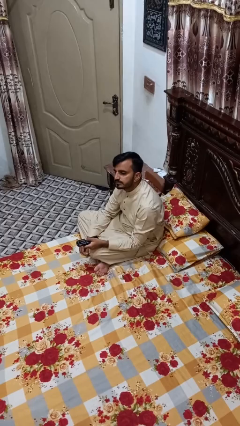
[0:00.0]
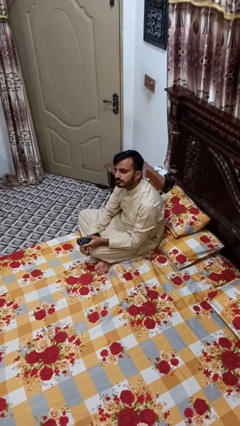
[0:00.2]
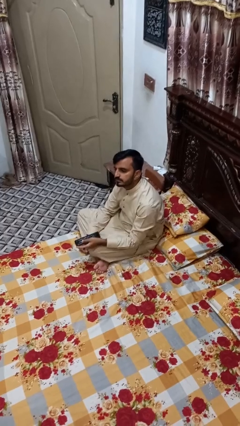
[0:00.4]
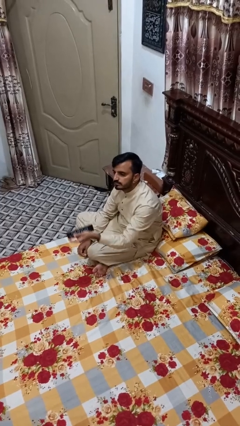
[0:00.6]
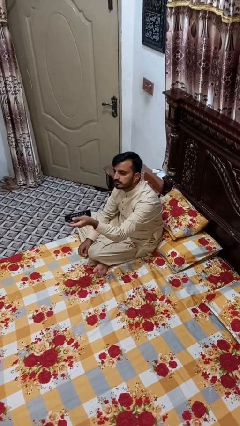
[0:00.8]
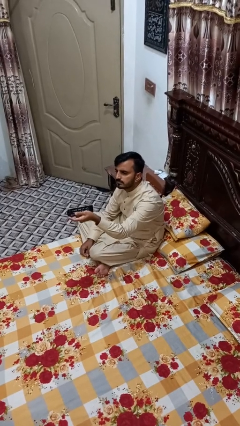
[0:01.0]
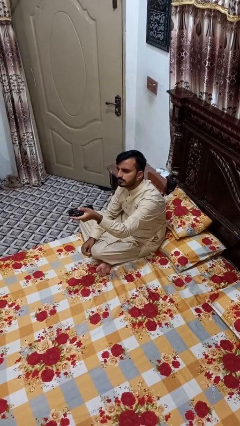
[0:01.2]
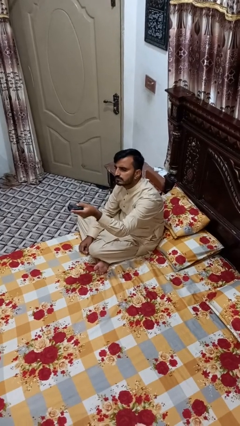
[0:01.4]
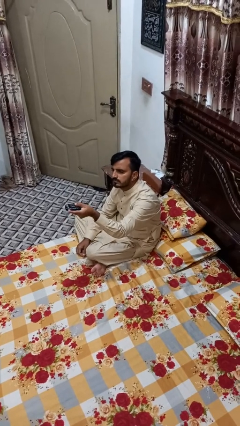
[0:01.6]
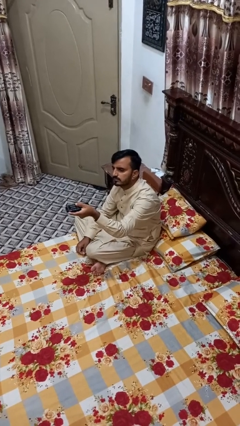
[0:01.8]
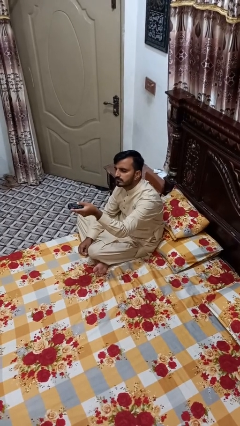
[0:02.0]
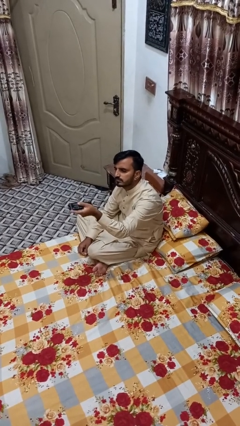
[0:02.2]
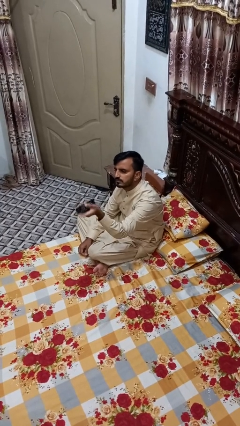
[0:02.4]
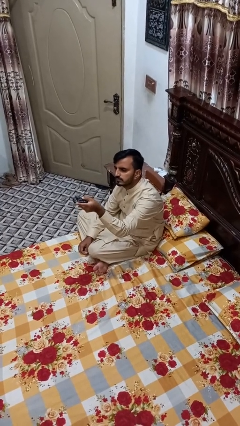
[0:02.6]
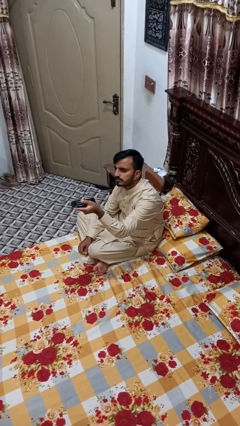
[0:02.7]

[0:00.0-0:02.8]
person uses television remote

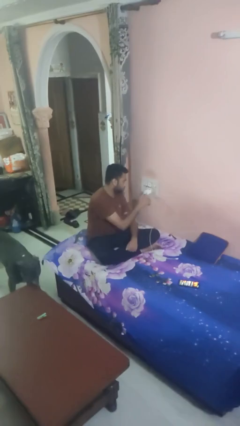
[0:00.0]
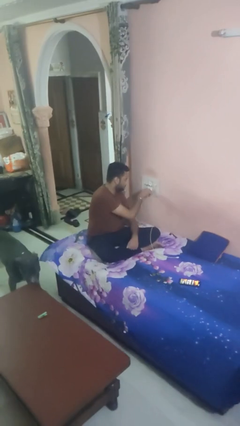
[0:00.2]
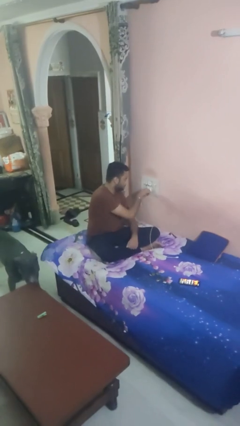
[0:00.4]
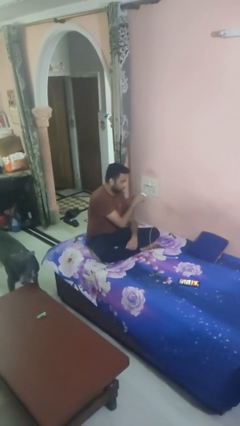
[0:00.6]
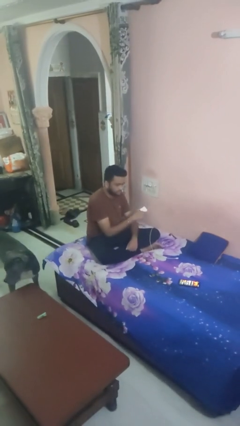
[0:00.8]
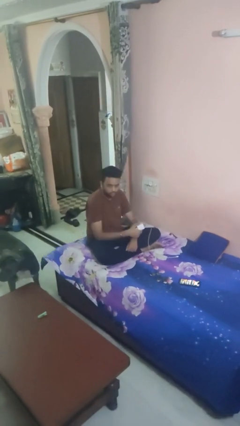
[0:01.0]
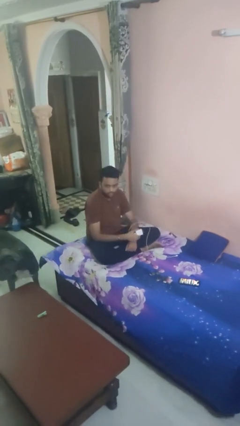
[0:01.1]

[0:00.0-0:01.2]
person unplugs from electrical socket

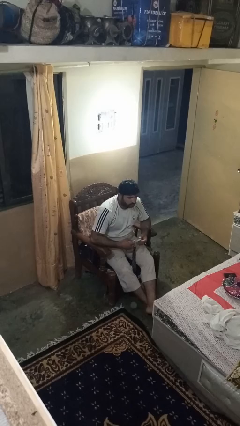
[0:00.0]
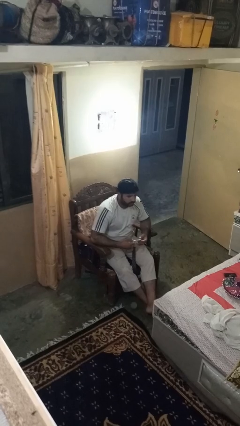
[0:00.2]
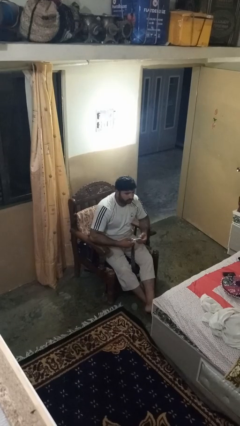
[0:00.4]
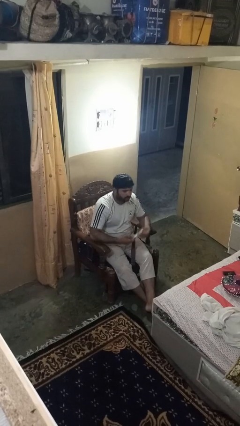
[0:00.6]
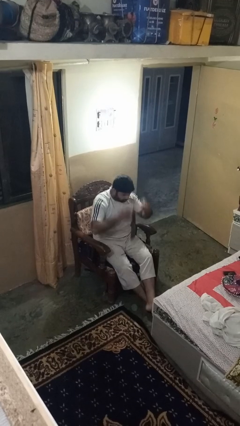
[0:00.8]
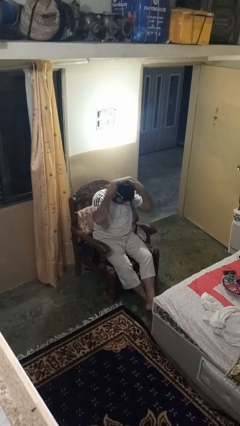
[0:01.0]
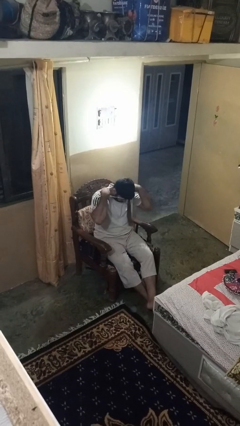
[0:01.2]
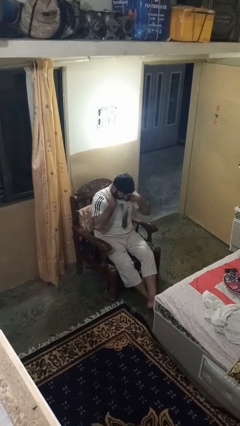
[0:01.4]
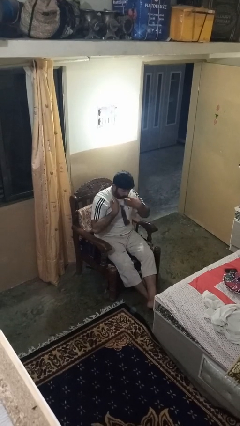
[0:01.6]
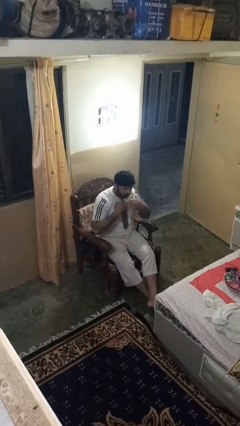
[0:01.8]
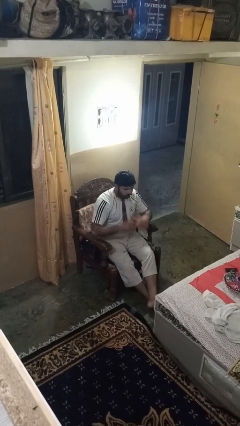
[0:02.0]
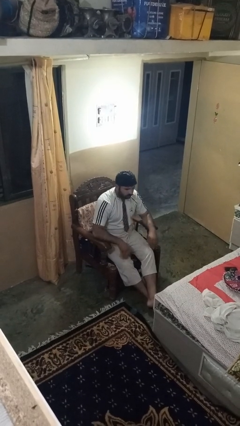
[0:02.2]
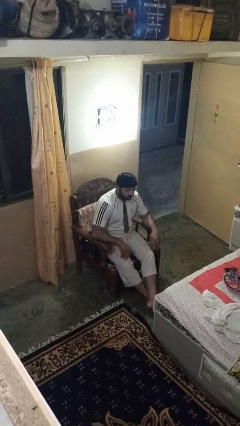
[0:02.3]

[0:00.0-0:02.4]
person puts on necktie

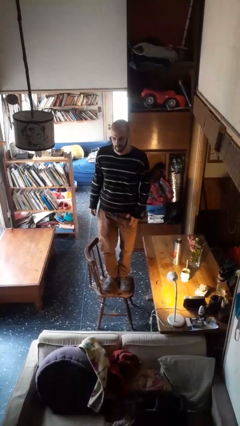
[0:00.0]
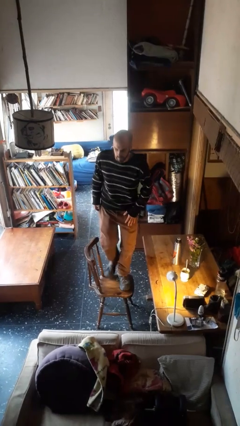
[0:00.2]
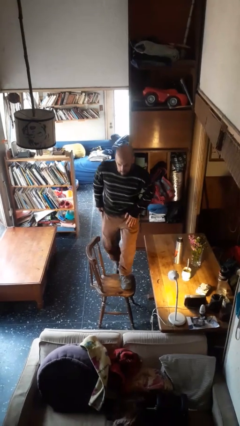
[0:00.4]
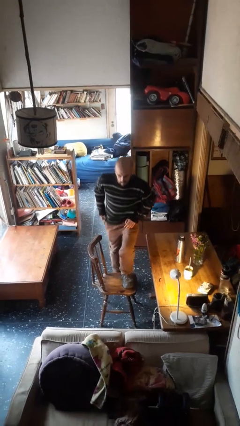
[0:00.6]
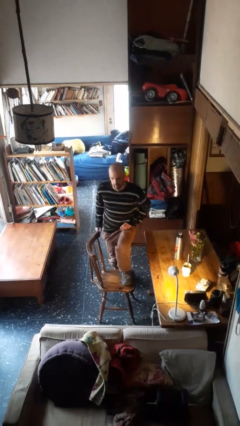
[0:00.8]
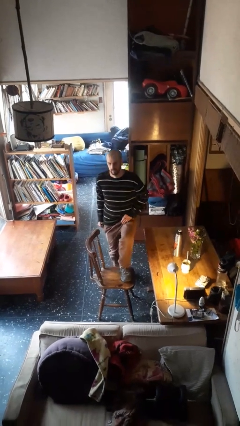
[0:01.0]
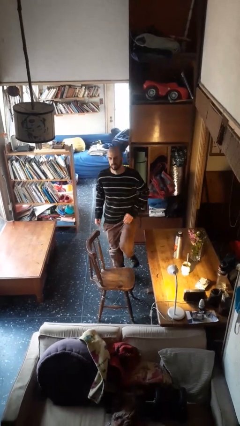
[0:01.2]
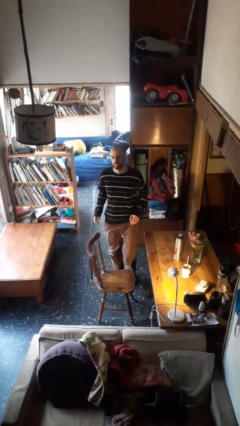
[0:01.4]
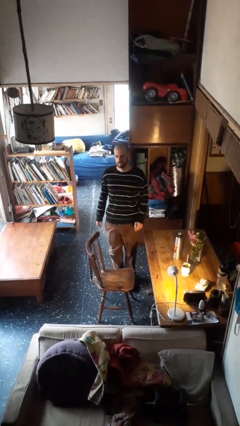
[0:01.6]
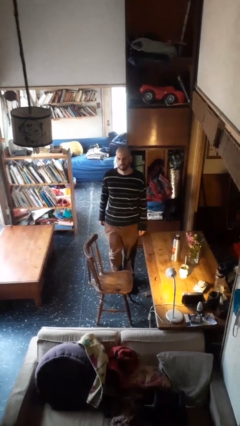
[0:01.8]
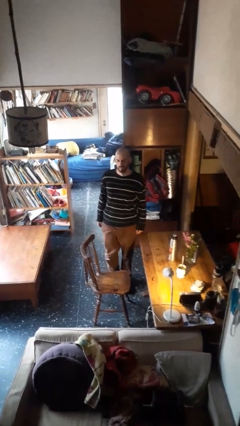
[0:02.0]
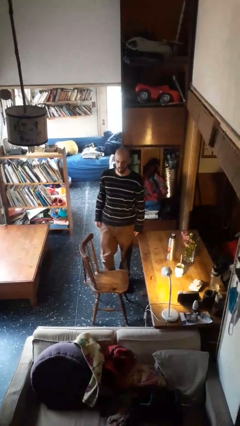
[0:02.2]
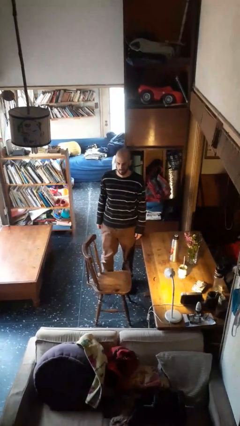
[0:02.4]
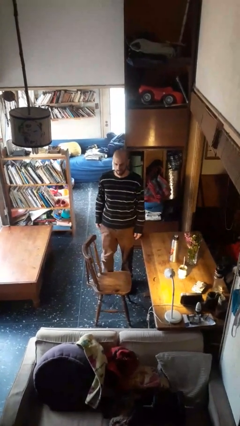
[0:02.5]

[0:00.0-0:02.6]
person climbs off chair

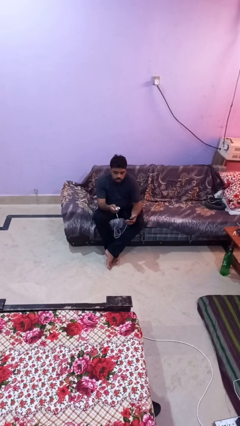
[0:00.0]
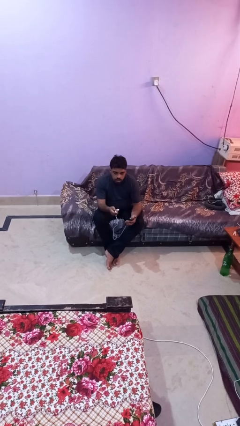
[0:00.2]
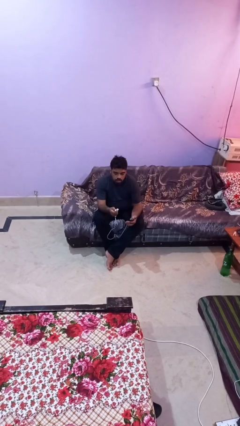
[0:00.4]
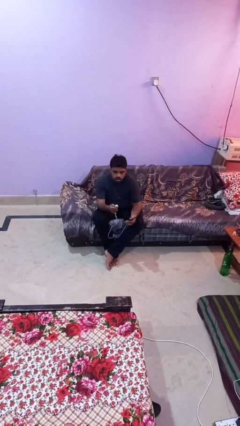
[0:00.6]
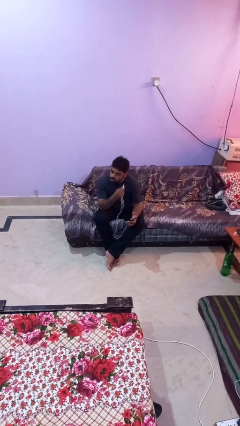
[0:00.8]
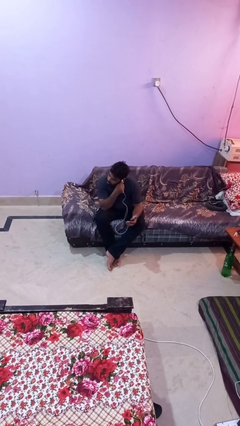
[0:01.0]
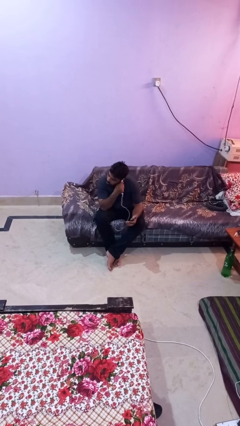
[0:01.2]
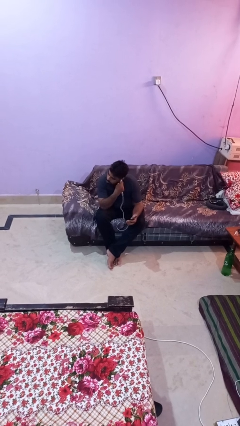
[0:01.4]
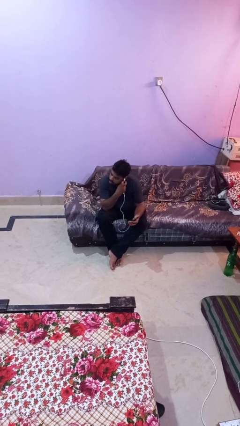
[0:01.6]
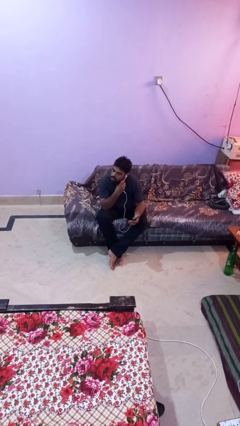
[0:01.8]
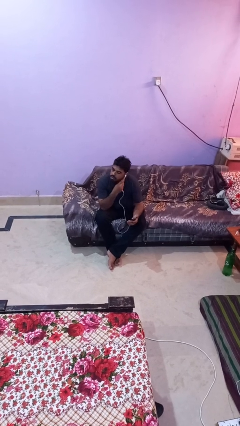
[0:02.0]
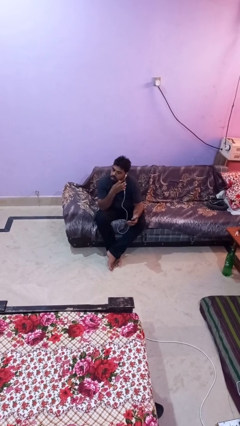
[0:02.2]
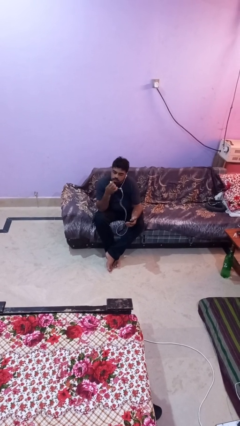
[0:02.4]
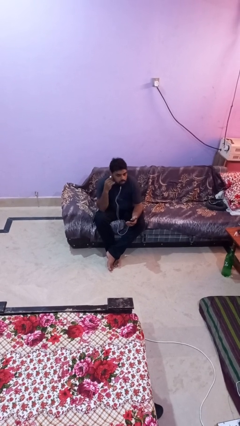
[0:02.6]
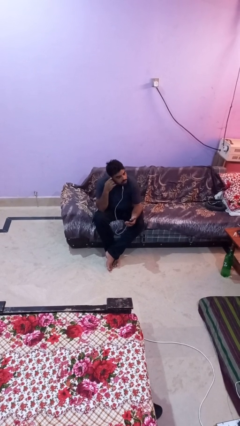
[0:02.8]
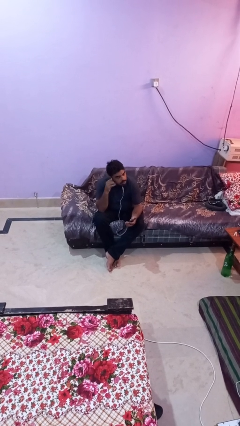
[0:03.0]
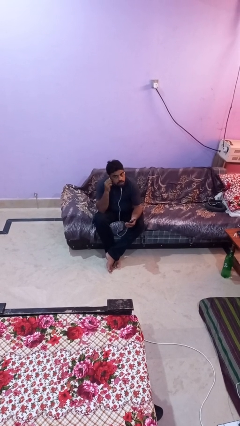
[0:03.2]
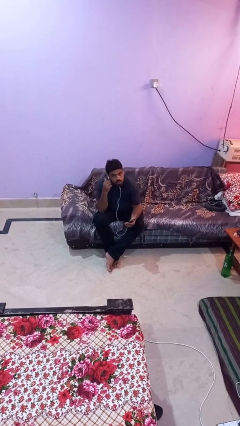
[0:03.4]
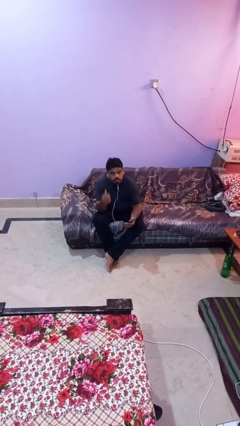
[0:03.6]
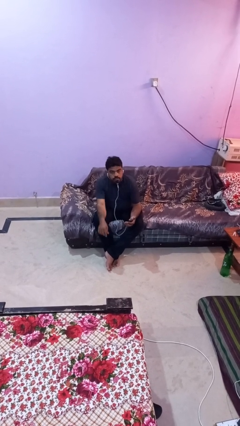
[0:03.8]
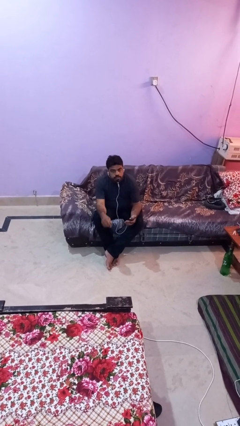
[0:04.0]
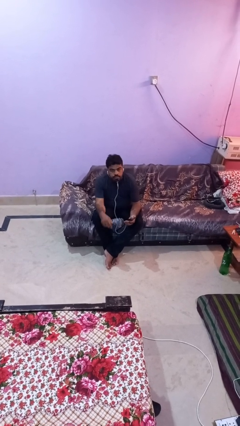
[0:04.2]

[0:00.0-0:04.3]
person puts on headphones

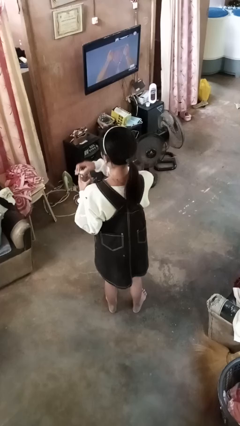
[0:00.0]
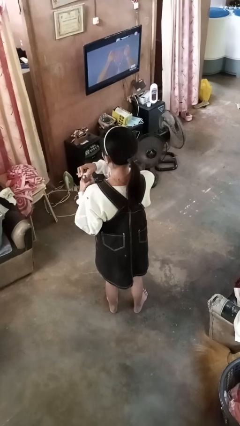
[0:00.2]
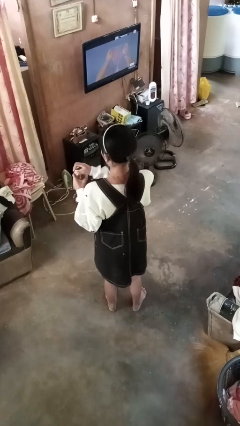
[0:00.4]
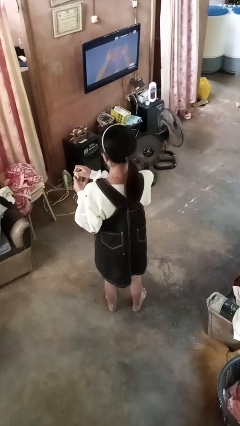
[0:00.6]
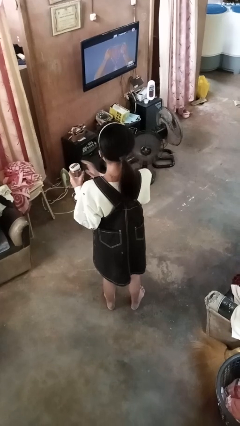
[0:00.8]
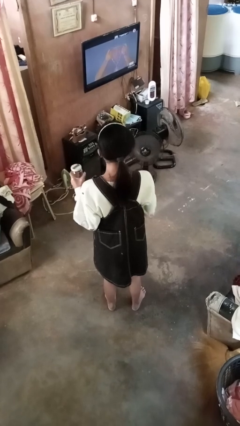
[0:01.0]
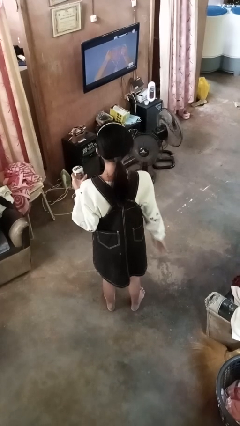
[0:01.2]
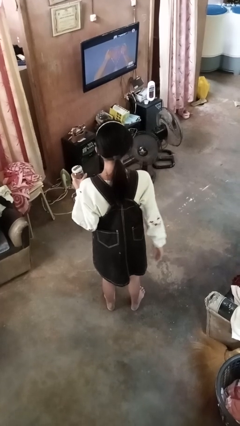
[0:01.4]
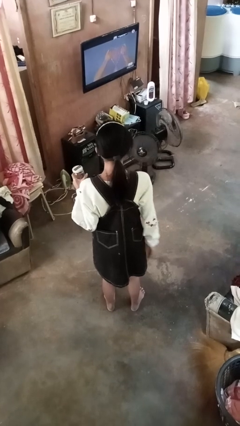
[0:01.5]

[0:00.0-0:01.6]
person closes jar

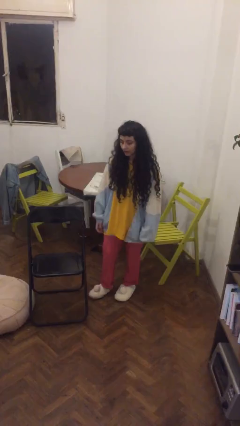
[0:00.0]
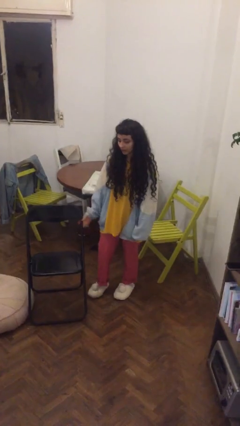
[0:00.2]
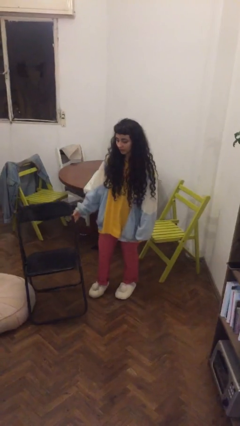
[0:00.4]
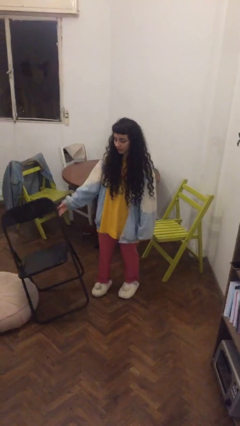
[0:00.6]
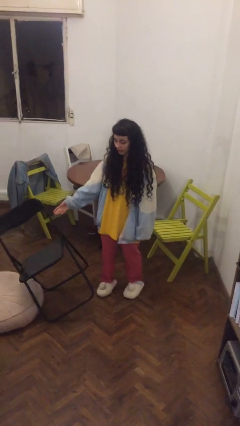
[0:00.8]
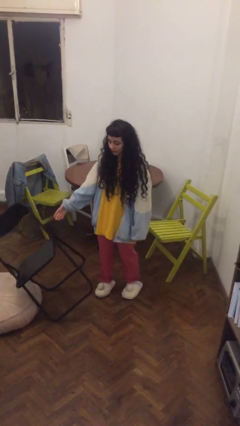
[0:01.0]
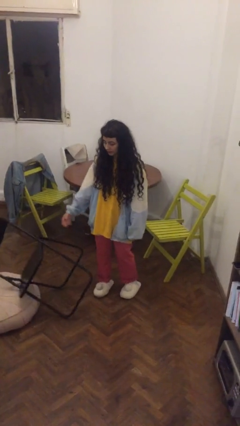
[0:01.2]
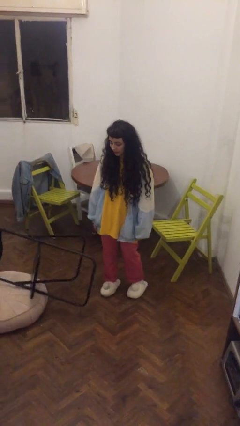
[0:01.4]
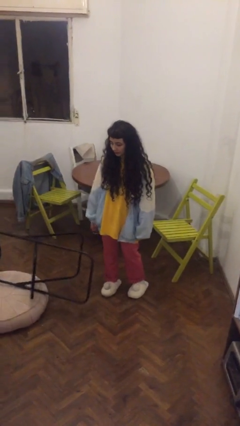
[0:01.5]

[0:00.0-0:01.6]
person knocks over furniture

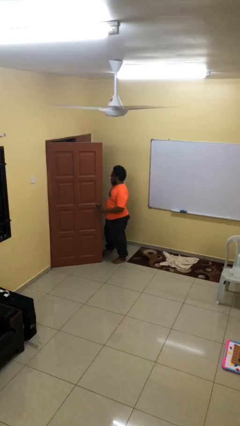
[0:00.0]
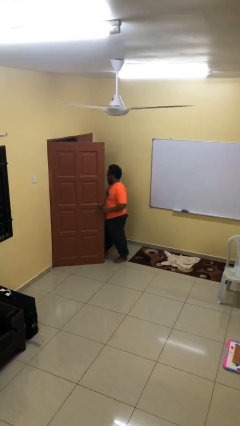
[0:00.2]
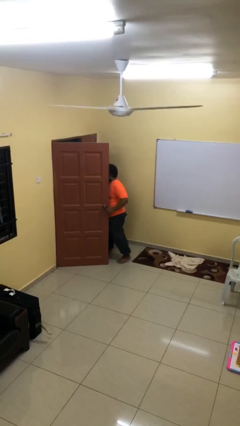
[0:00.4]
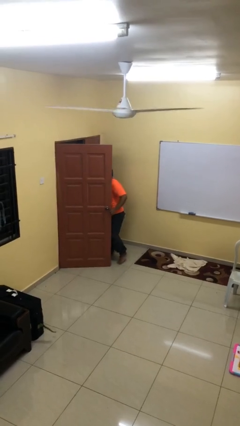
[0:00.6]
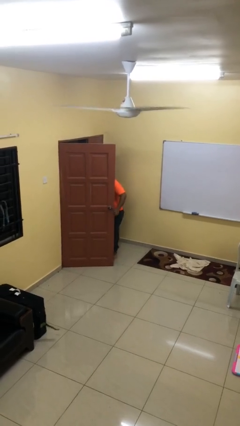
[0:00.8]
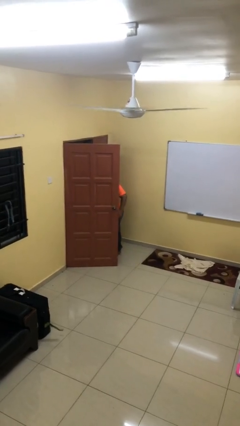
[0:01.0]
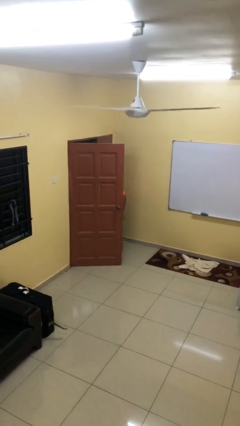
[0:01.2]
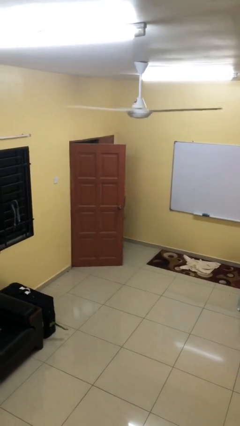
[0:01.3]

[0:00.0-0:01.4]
person exits scene through structure
